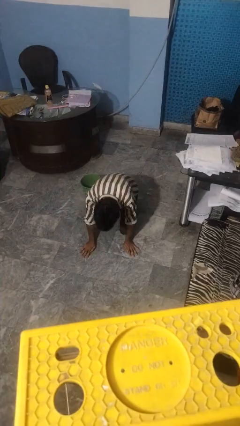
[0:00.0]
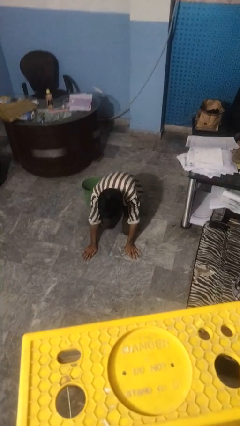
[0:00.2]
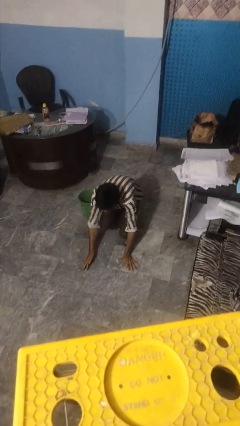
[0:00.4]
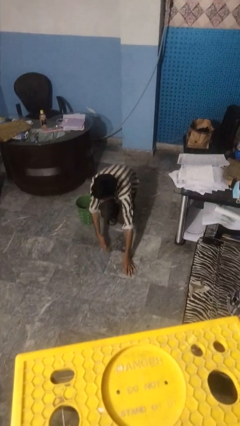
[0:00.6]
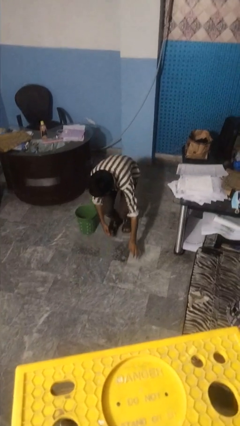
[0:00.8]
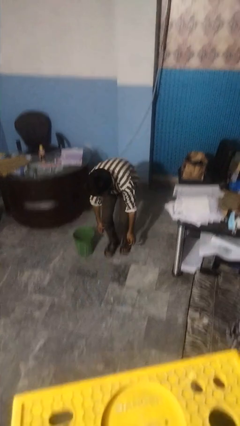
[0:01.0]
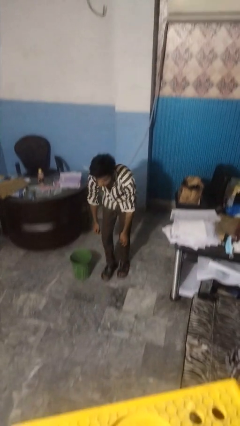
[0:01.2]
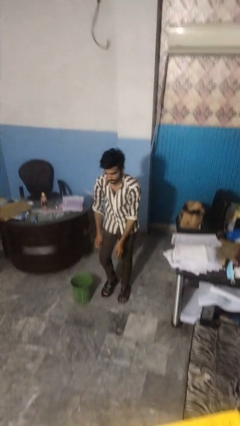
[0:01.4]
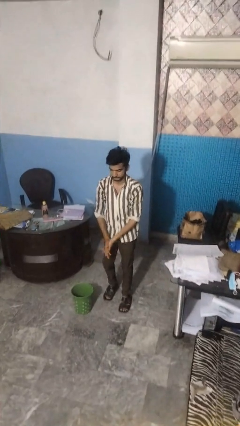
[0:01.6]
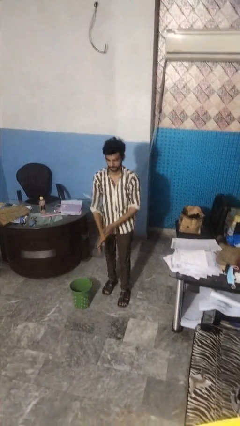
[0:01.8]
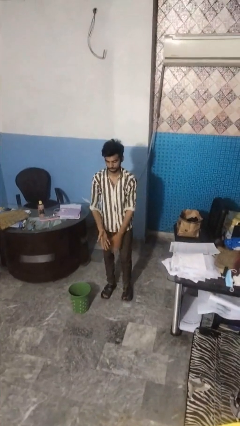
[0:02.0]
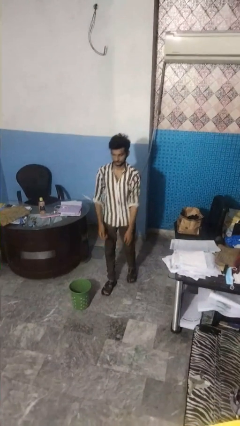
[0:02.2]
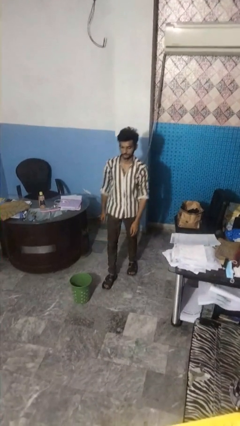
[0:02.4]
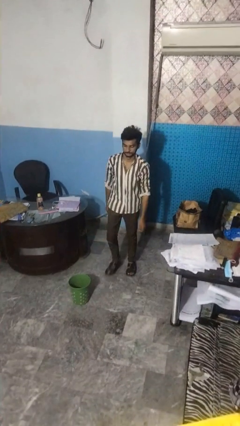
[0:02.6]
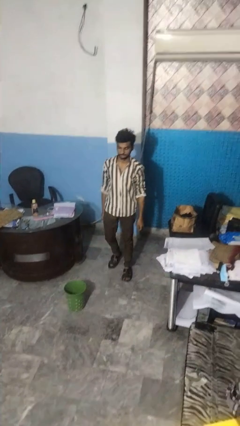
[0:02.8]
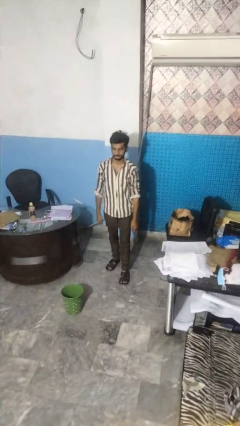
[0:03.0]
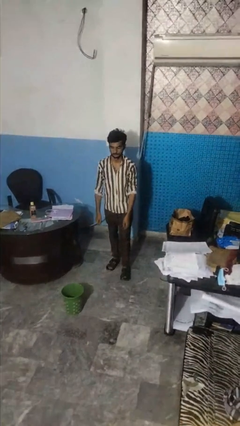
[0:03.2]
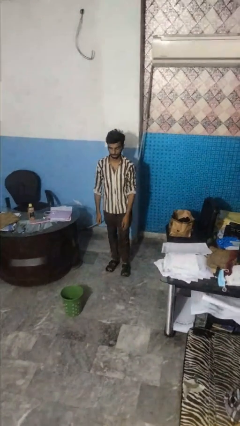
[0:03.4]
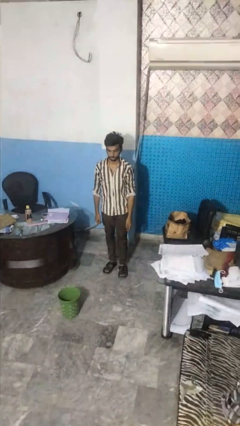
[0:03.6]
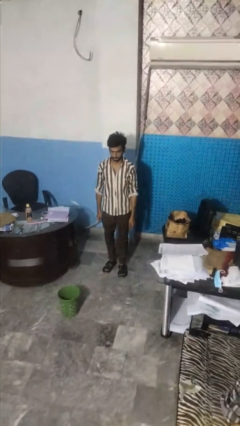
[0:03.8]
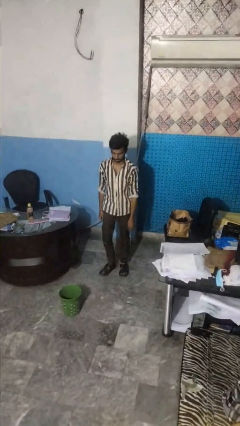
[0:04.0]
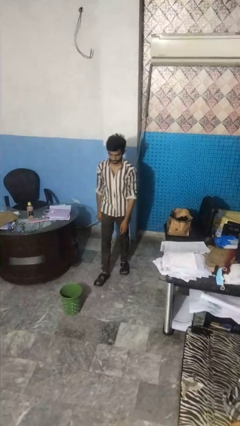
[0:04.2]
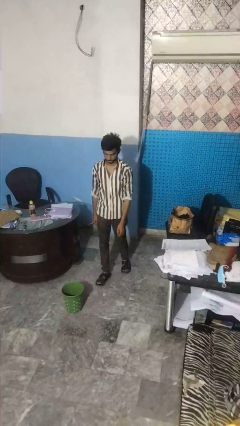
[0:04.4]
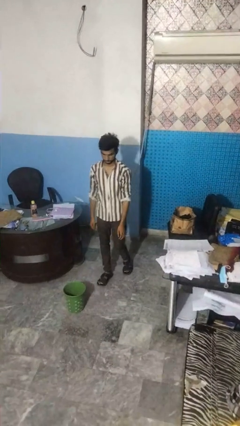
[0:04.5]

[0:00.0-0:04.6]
person stands up from floor

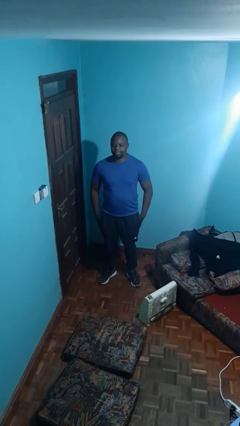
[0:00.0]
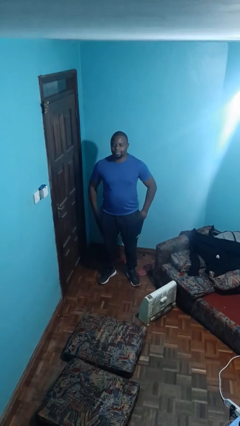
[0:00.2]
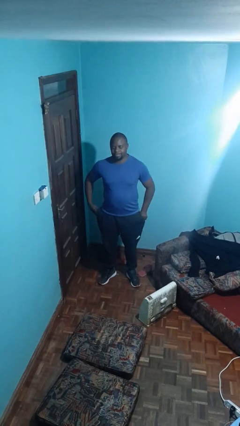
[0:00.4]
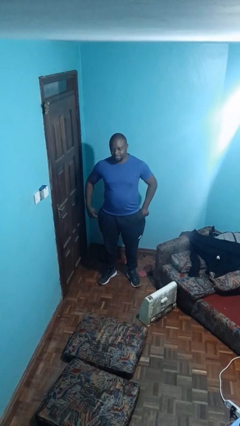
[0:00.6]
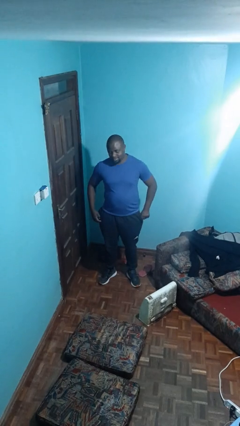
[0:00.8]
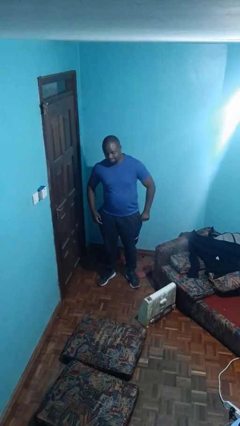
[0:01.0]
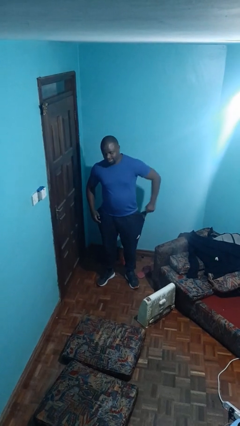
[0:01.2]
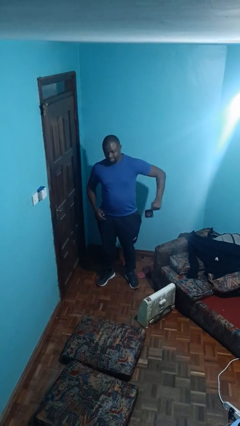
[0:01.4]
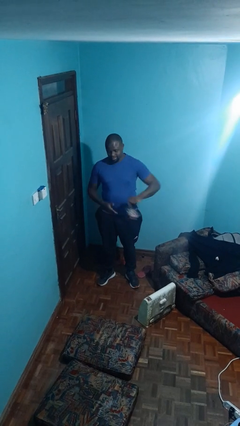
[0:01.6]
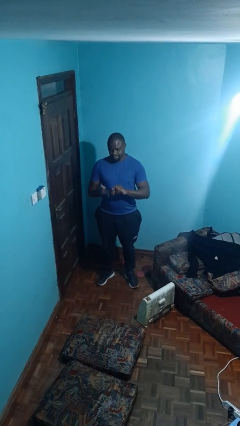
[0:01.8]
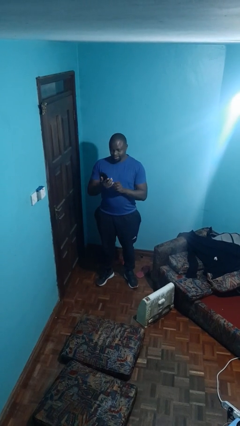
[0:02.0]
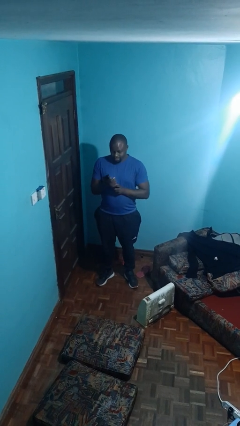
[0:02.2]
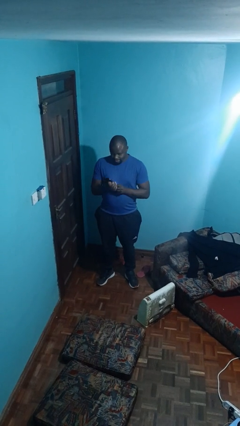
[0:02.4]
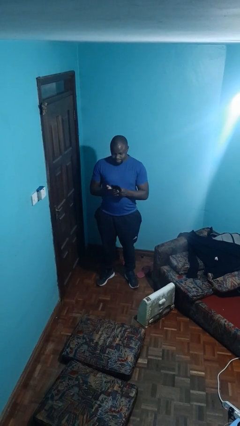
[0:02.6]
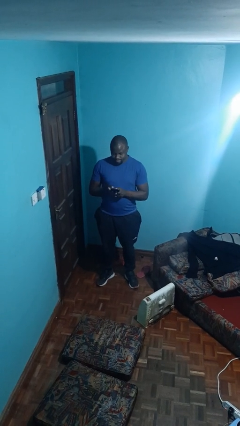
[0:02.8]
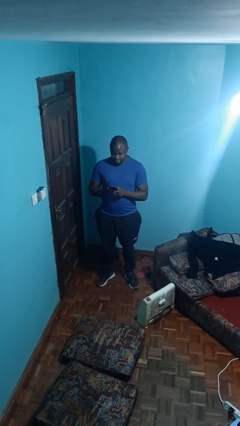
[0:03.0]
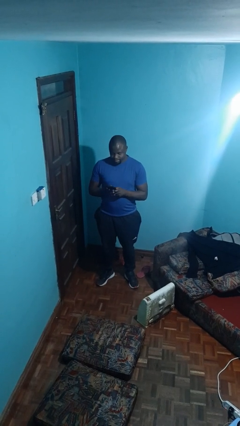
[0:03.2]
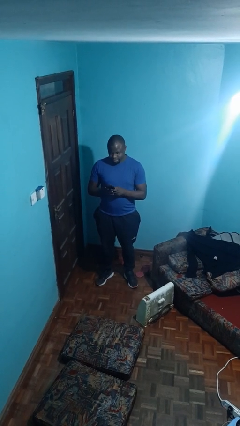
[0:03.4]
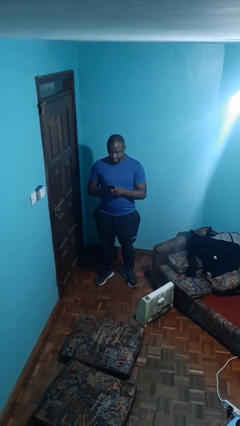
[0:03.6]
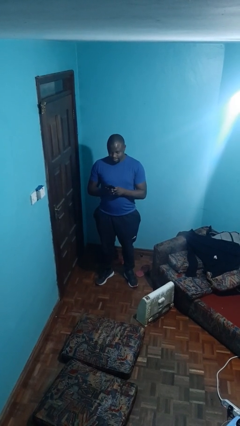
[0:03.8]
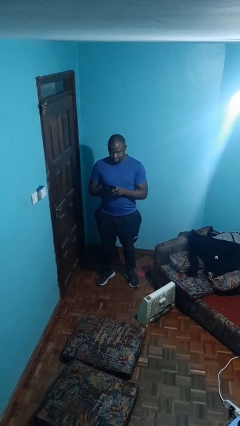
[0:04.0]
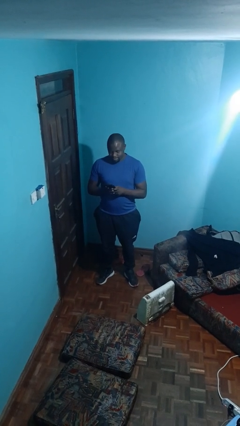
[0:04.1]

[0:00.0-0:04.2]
person takes phone from pocket

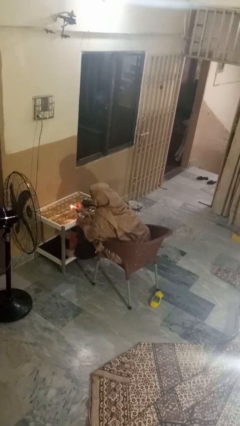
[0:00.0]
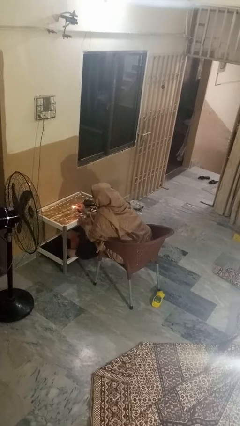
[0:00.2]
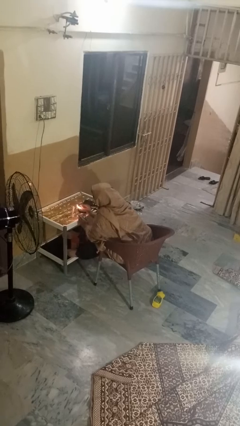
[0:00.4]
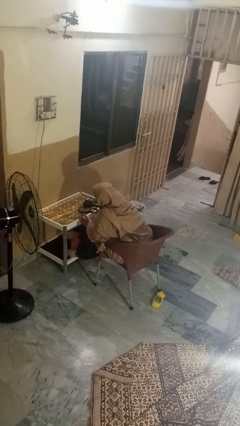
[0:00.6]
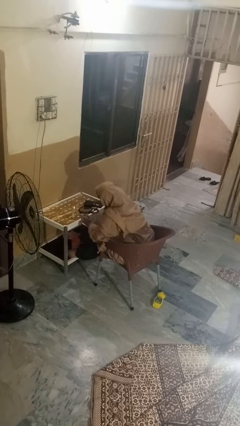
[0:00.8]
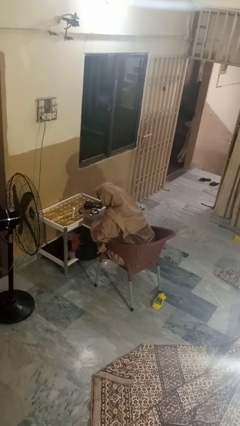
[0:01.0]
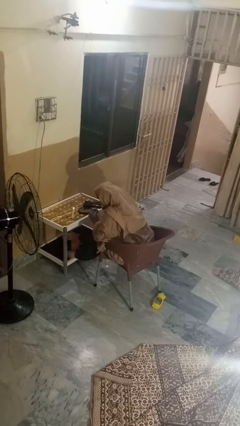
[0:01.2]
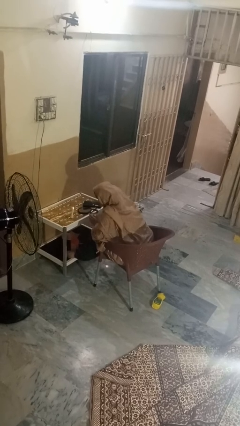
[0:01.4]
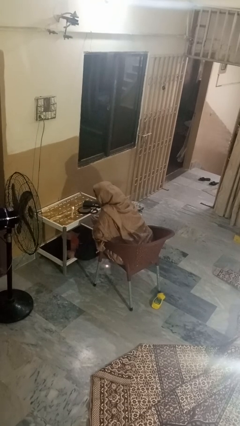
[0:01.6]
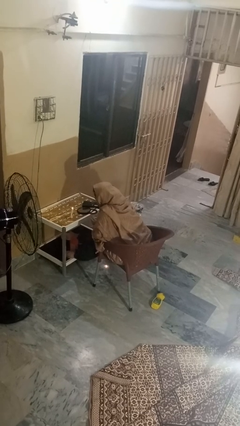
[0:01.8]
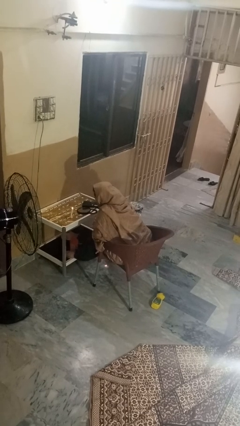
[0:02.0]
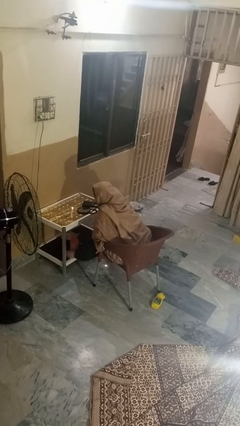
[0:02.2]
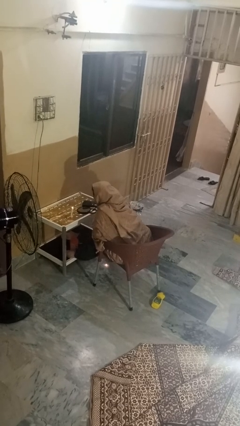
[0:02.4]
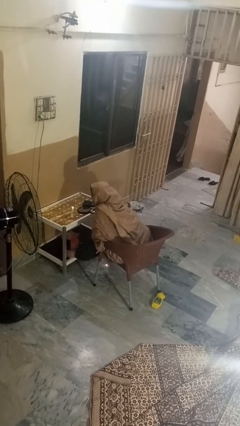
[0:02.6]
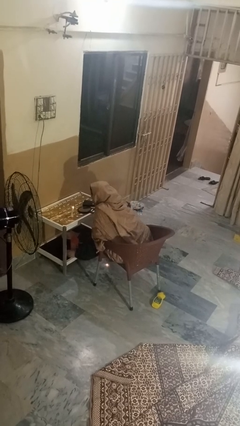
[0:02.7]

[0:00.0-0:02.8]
person lights candle

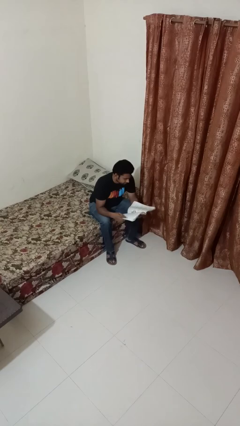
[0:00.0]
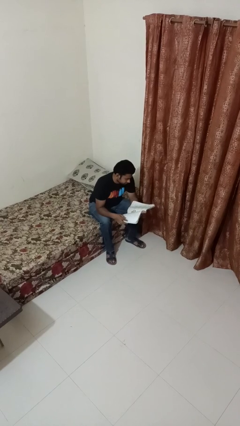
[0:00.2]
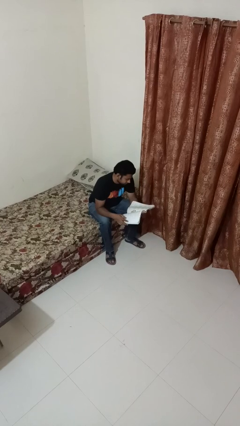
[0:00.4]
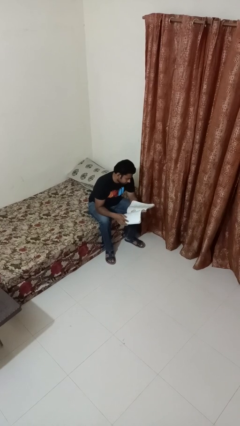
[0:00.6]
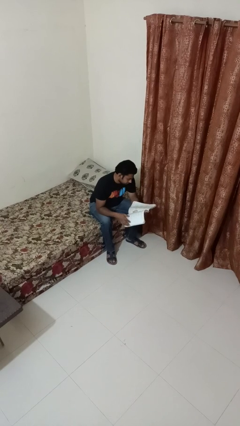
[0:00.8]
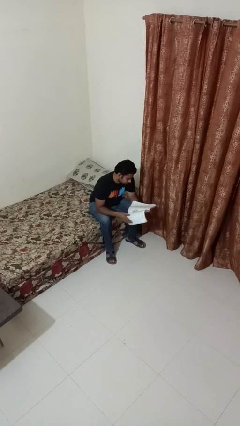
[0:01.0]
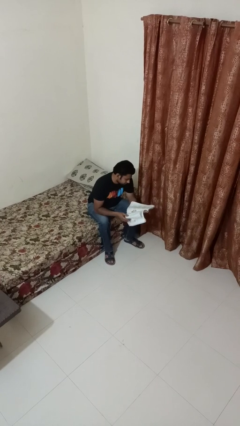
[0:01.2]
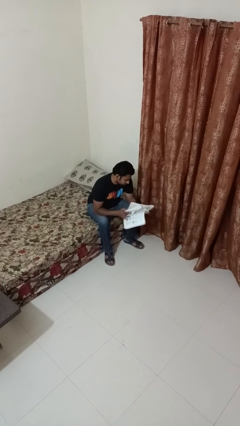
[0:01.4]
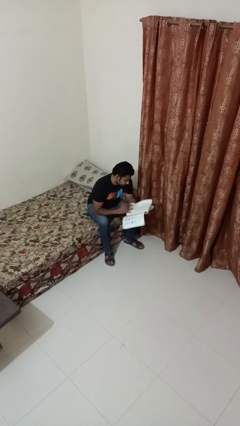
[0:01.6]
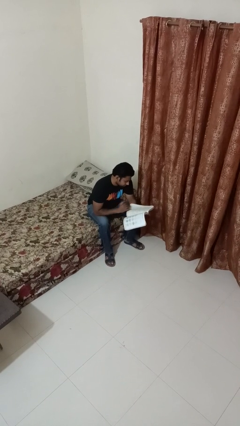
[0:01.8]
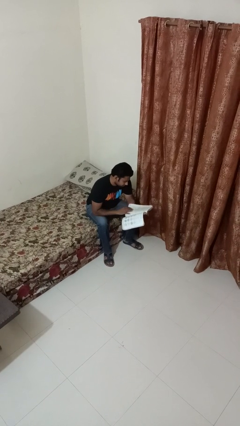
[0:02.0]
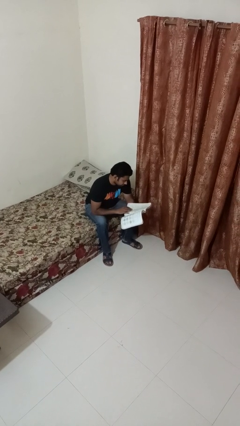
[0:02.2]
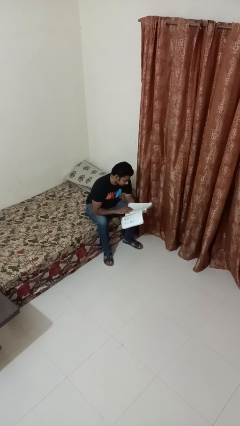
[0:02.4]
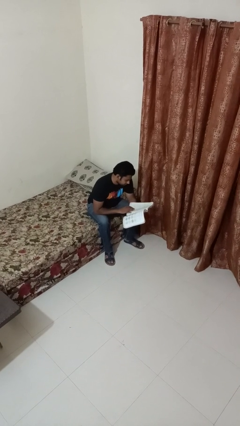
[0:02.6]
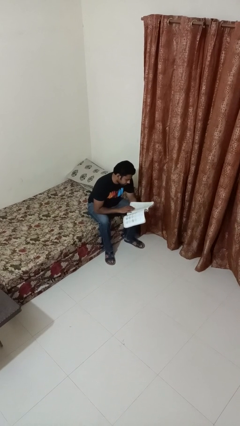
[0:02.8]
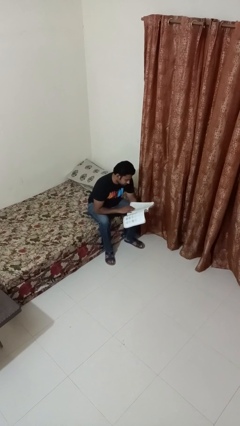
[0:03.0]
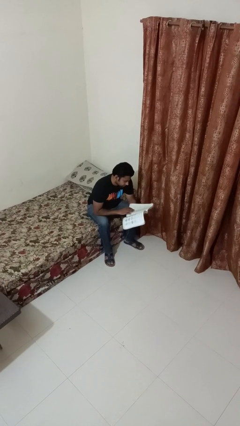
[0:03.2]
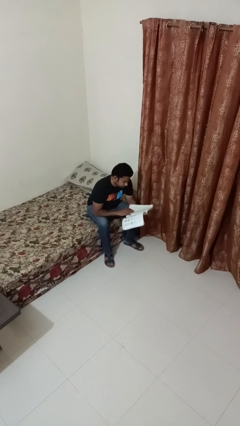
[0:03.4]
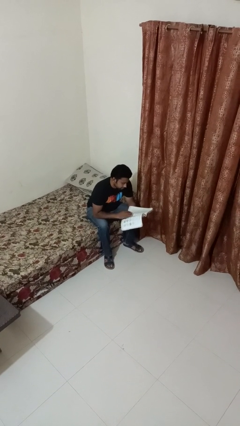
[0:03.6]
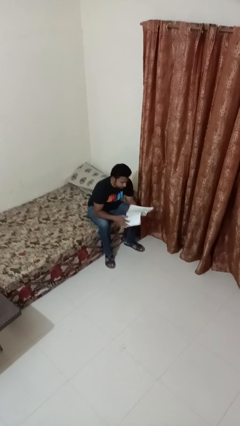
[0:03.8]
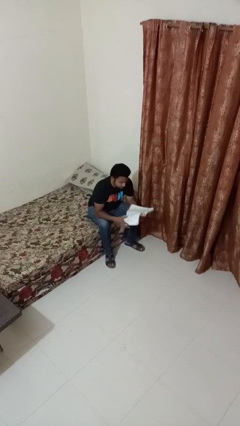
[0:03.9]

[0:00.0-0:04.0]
person reads book

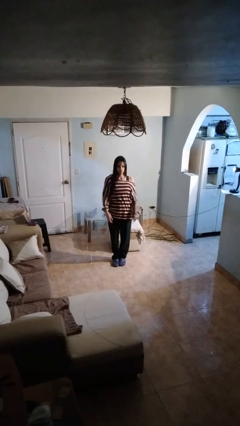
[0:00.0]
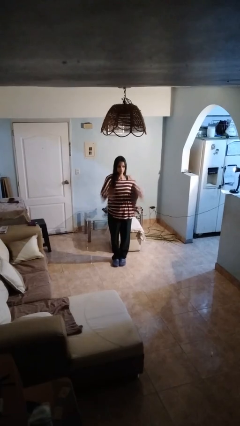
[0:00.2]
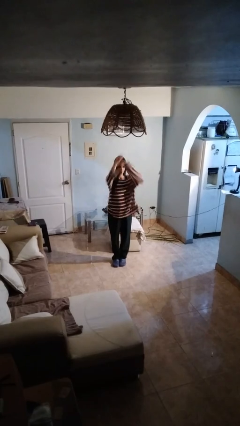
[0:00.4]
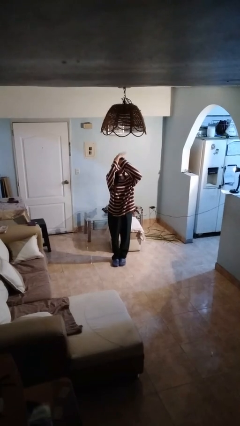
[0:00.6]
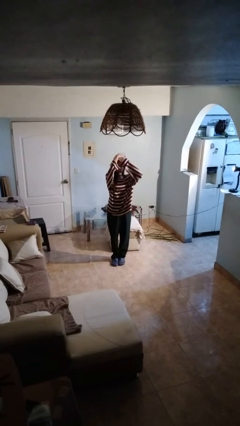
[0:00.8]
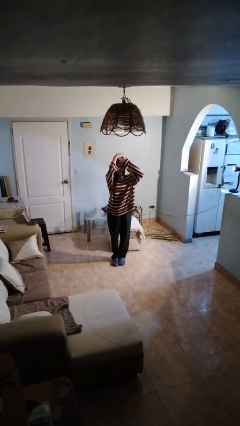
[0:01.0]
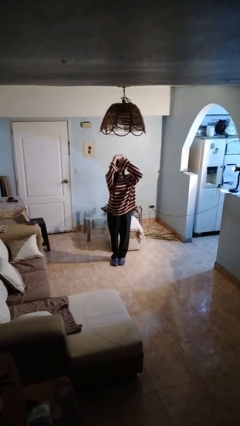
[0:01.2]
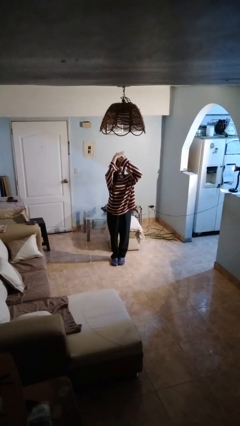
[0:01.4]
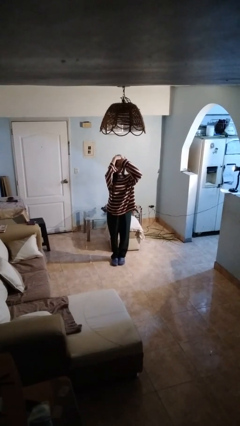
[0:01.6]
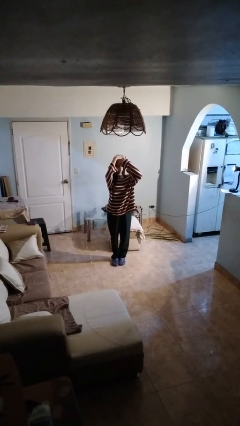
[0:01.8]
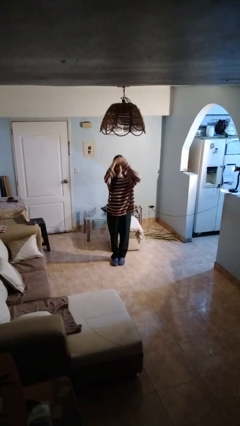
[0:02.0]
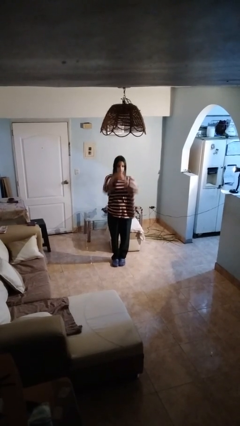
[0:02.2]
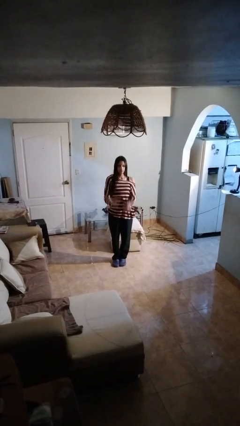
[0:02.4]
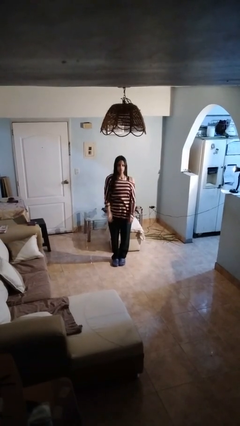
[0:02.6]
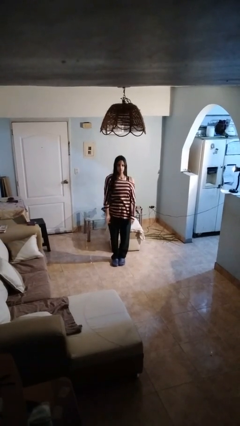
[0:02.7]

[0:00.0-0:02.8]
person pats head
